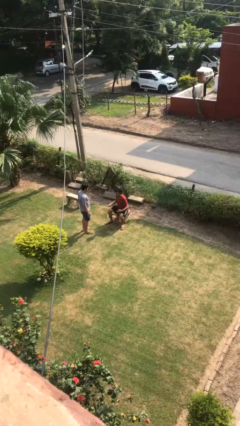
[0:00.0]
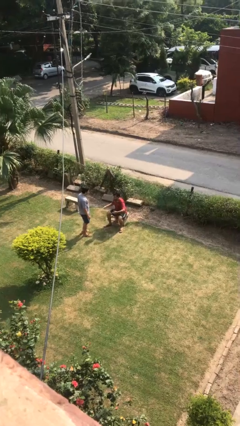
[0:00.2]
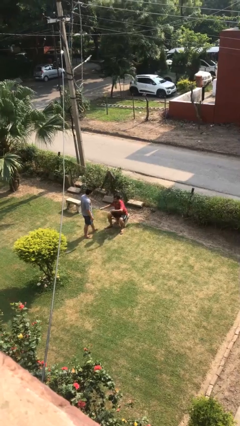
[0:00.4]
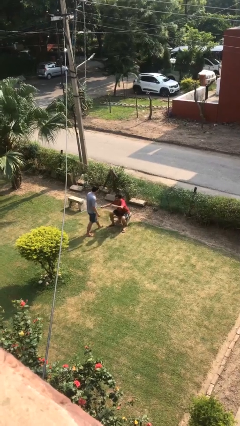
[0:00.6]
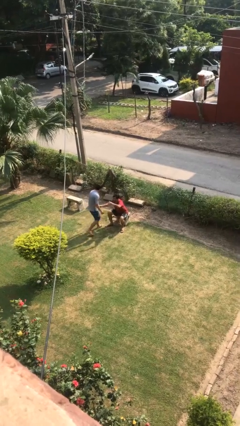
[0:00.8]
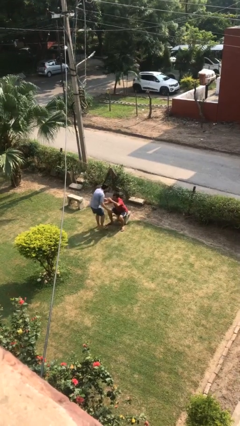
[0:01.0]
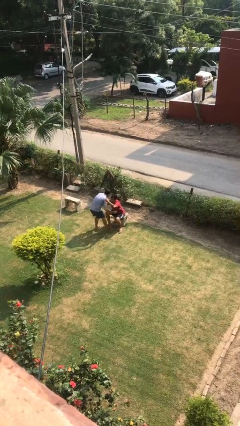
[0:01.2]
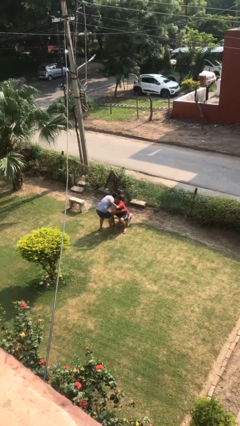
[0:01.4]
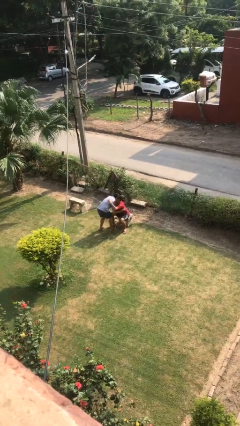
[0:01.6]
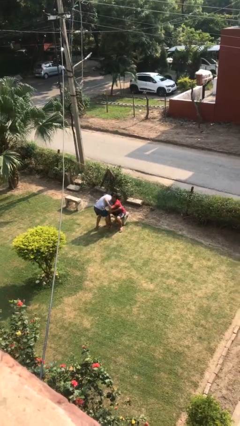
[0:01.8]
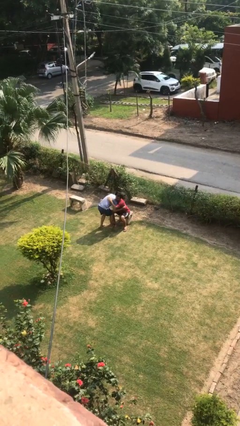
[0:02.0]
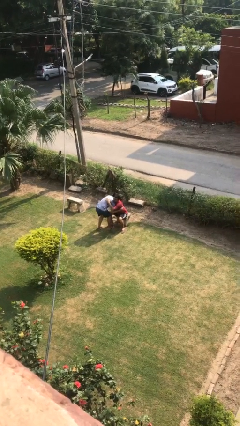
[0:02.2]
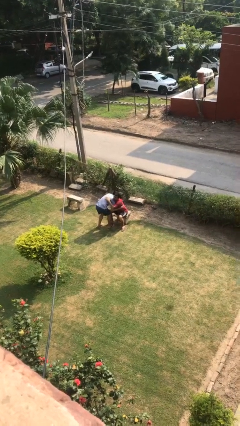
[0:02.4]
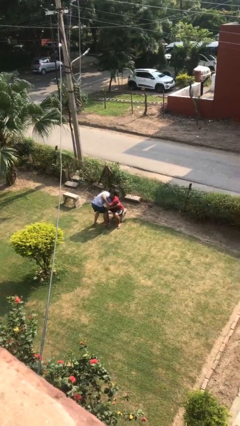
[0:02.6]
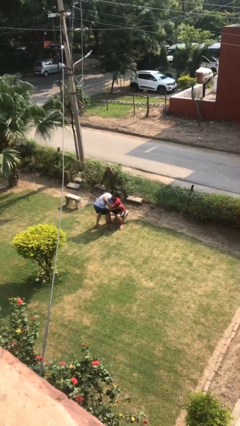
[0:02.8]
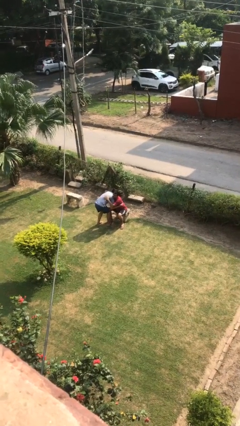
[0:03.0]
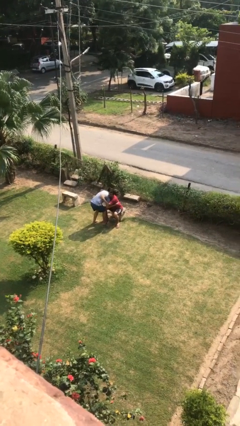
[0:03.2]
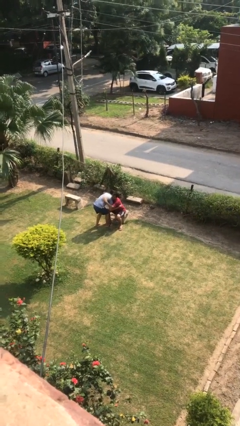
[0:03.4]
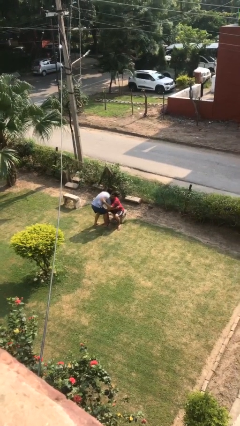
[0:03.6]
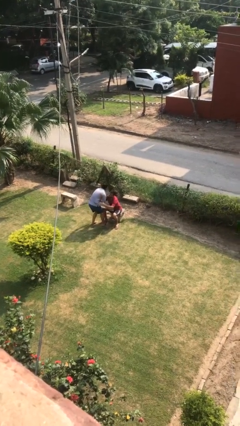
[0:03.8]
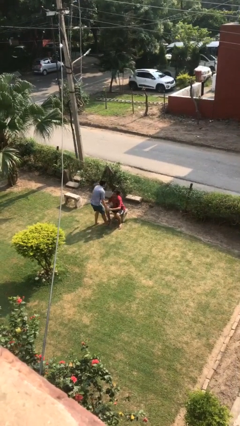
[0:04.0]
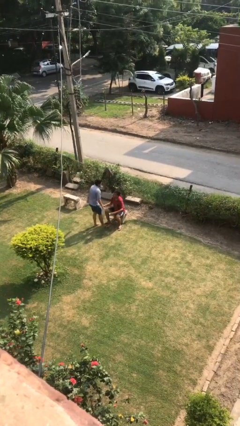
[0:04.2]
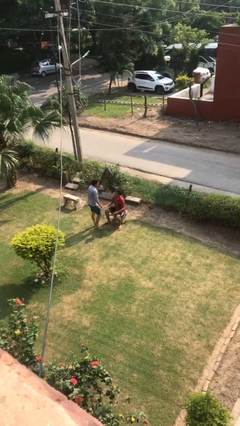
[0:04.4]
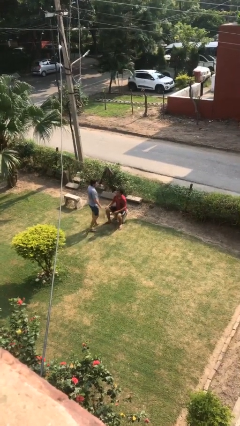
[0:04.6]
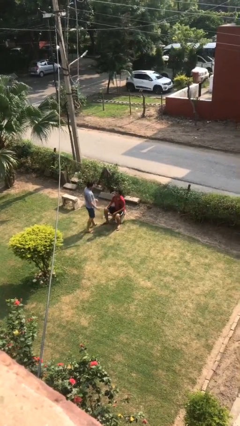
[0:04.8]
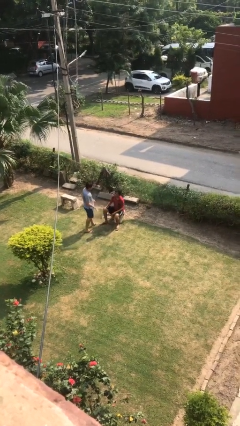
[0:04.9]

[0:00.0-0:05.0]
person embraces person

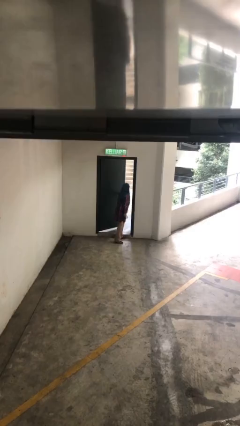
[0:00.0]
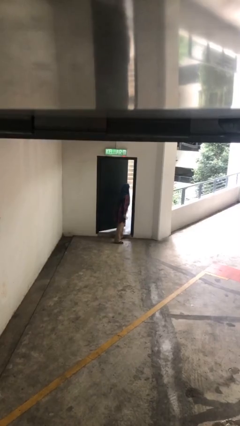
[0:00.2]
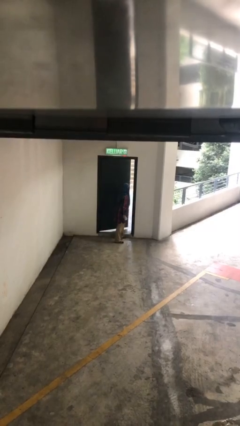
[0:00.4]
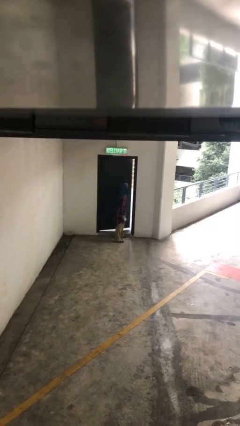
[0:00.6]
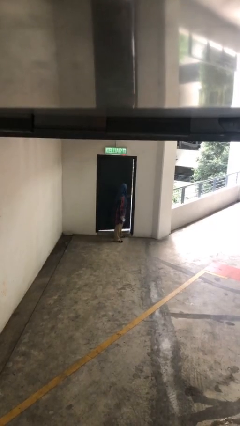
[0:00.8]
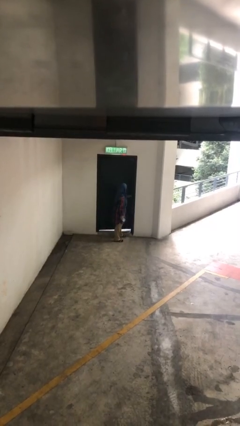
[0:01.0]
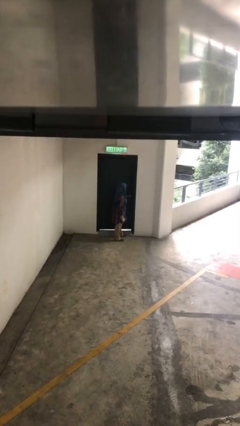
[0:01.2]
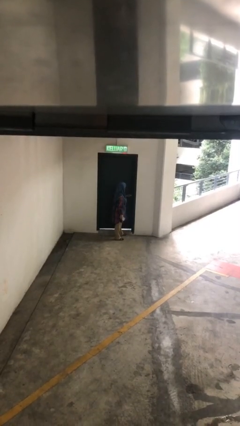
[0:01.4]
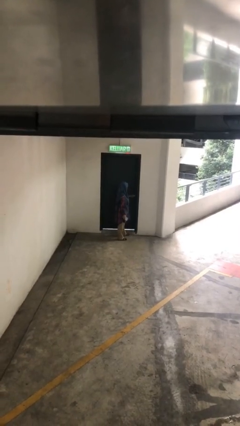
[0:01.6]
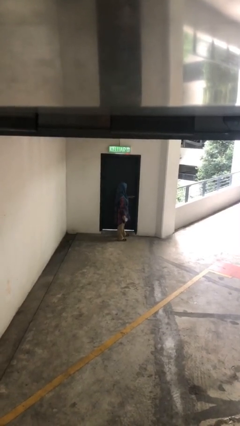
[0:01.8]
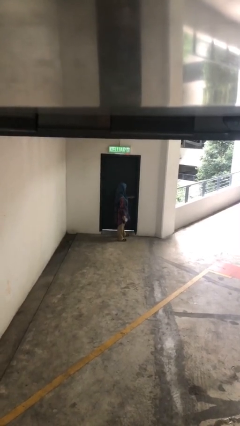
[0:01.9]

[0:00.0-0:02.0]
person closes facility door

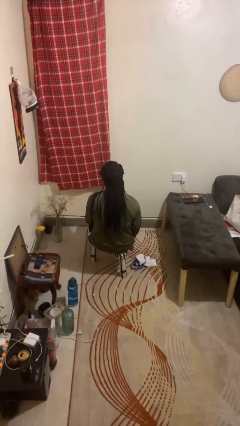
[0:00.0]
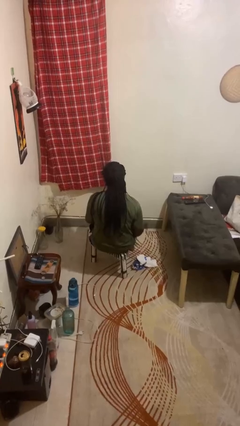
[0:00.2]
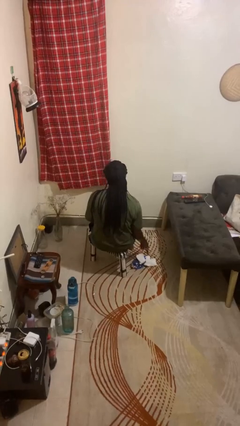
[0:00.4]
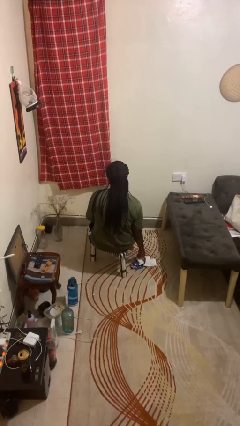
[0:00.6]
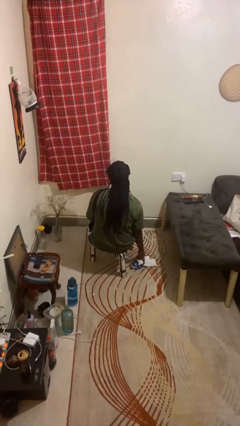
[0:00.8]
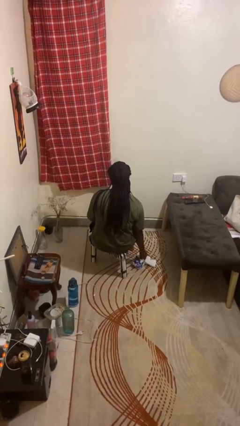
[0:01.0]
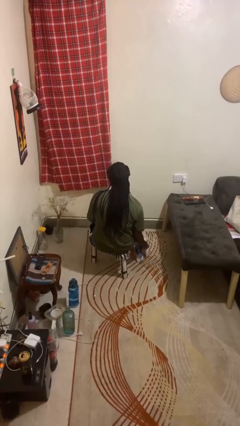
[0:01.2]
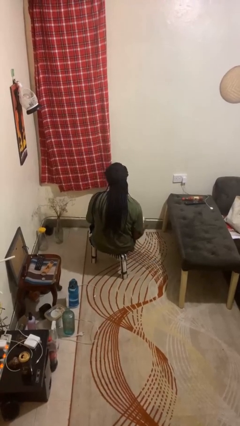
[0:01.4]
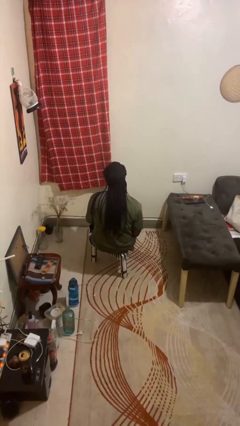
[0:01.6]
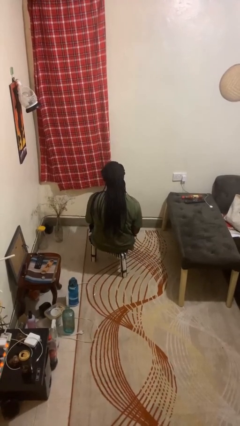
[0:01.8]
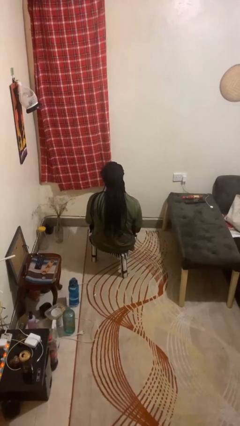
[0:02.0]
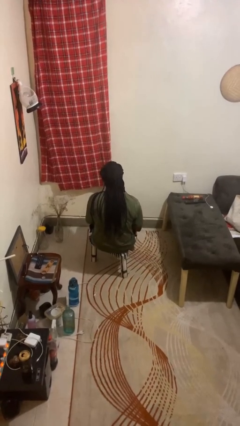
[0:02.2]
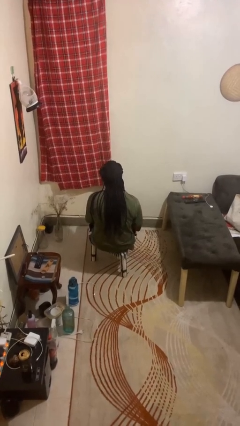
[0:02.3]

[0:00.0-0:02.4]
person picks up object from floor

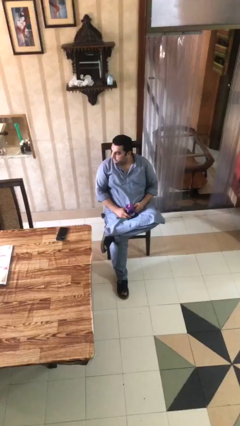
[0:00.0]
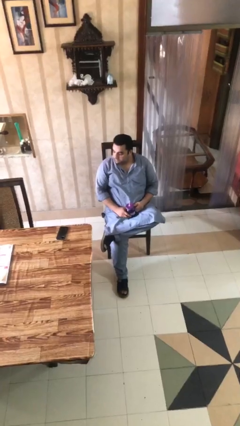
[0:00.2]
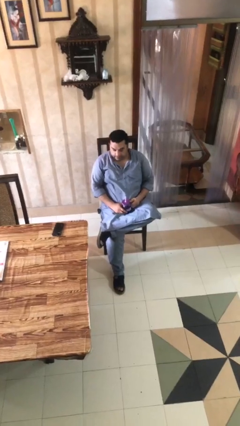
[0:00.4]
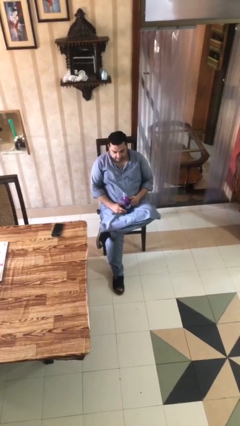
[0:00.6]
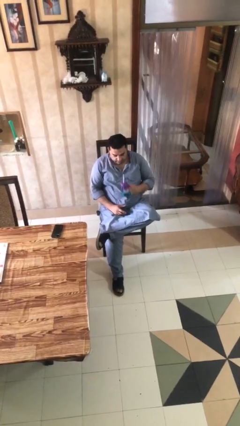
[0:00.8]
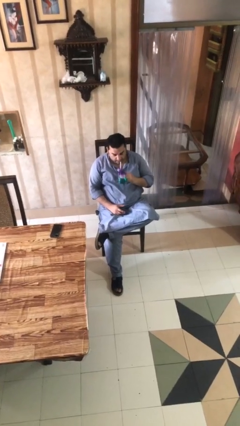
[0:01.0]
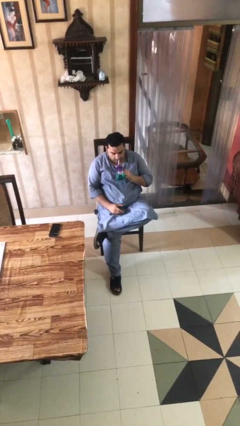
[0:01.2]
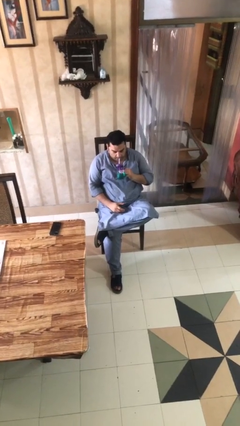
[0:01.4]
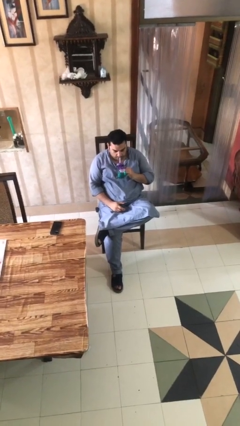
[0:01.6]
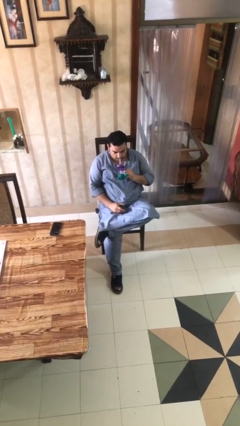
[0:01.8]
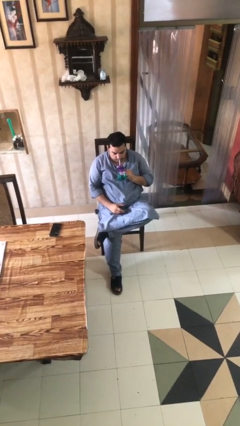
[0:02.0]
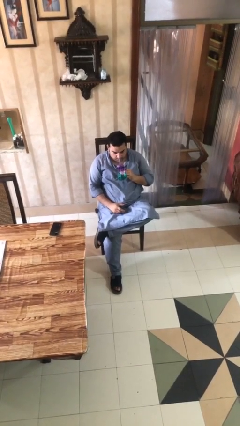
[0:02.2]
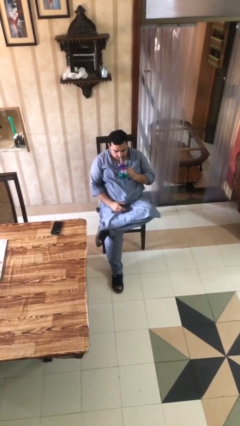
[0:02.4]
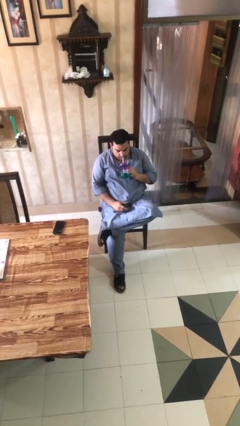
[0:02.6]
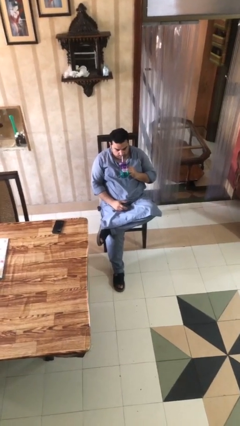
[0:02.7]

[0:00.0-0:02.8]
person drinks from straw

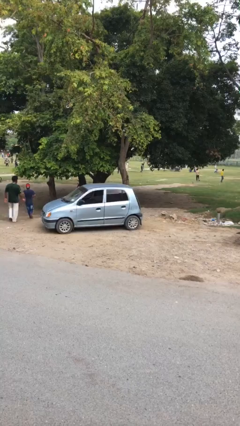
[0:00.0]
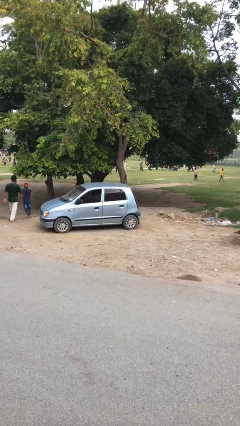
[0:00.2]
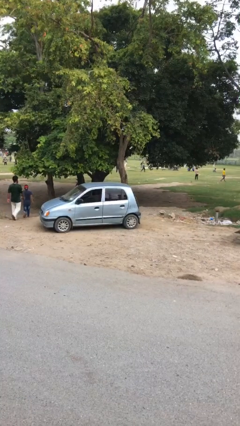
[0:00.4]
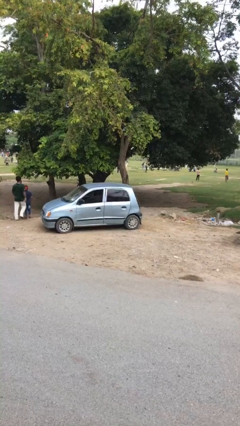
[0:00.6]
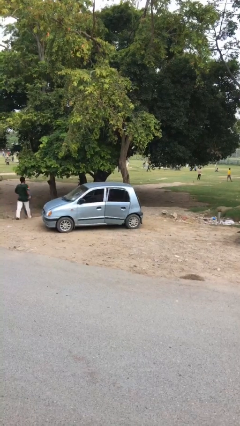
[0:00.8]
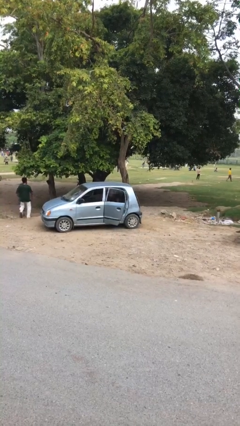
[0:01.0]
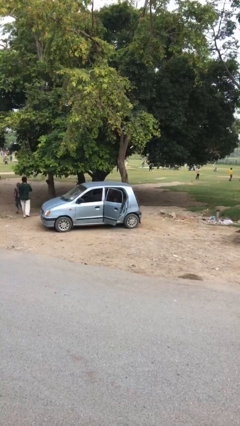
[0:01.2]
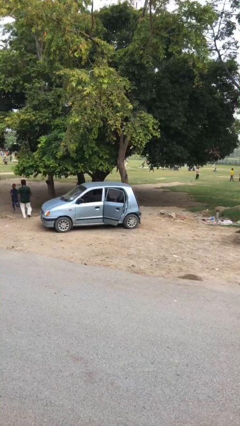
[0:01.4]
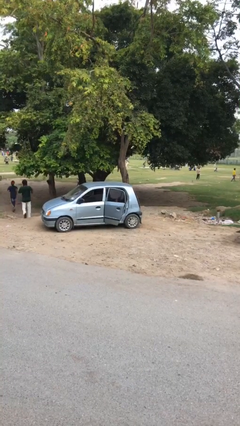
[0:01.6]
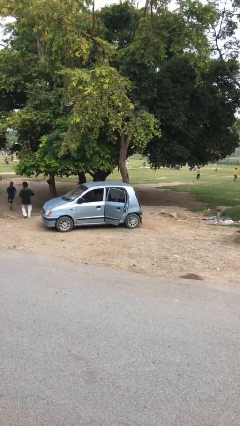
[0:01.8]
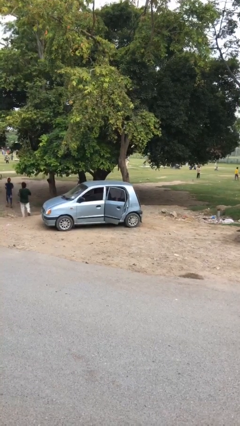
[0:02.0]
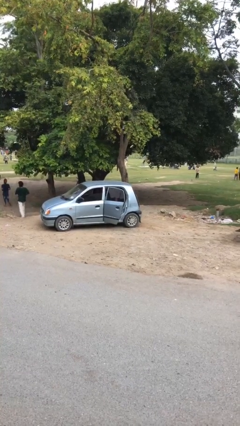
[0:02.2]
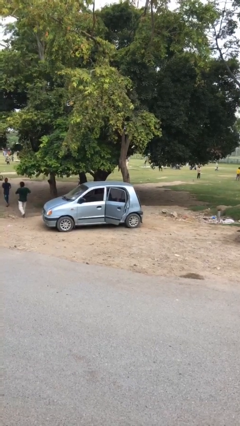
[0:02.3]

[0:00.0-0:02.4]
person opens car door

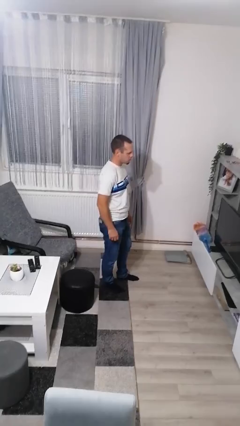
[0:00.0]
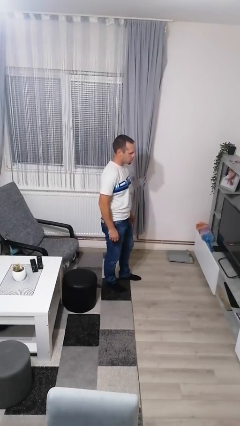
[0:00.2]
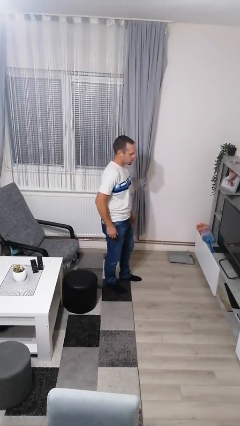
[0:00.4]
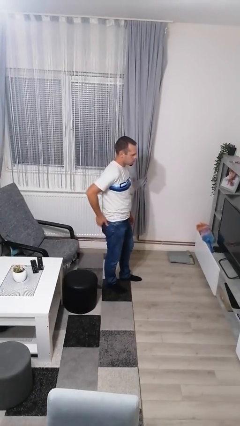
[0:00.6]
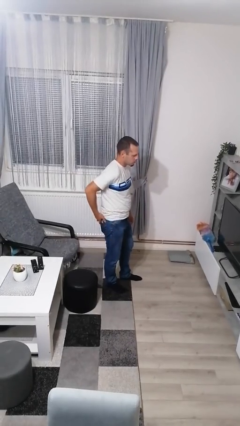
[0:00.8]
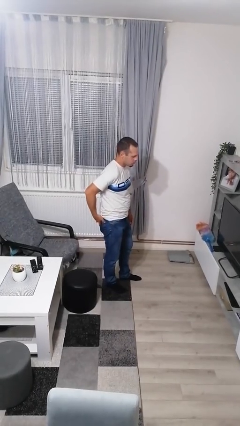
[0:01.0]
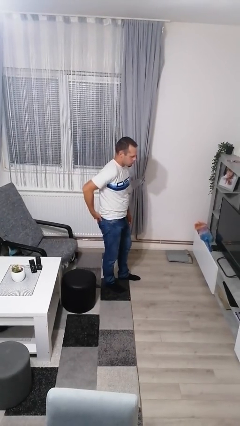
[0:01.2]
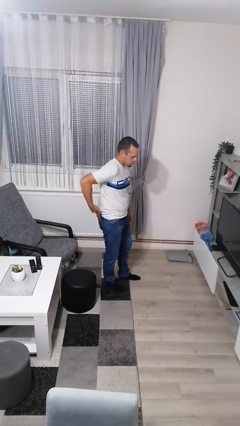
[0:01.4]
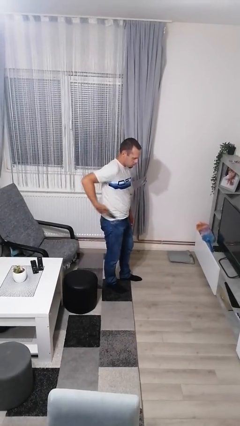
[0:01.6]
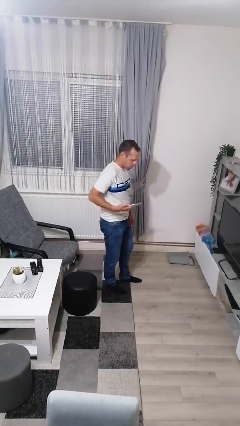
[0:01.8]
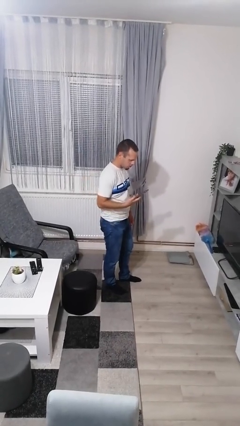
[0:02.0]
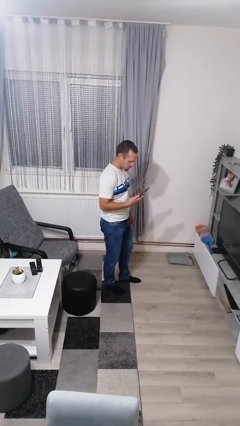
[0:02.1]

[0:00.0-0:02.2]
person takes phone from pocket

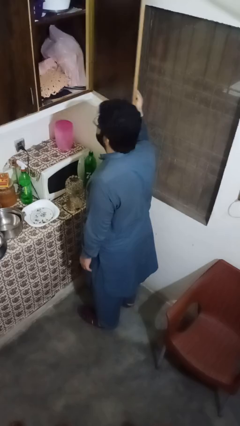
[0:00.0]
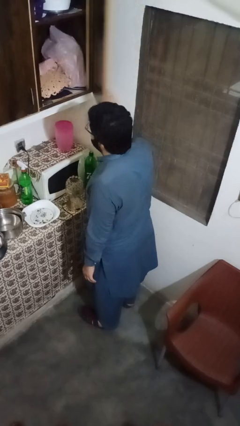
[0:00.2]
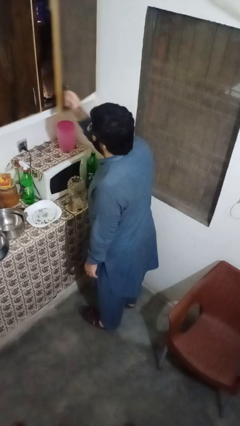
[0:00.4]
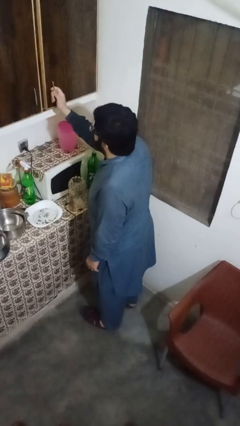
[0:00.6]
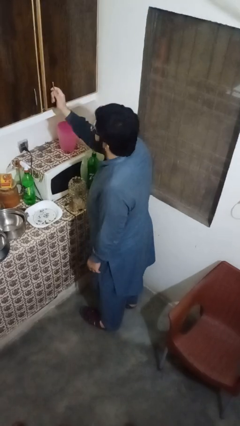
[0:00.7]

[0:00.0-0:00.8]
person closes cabinet
